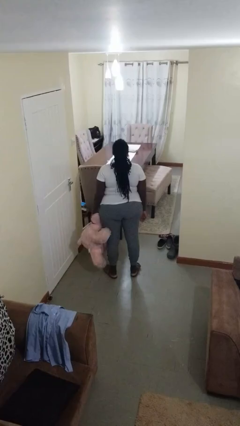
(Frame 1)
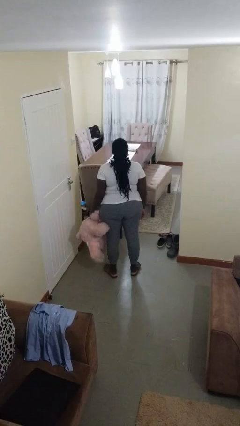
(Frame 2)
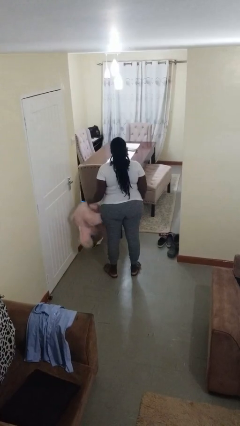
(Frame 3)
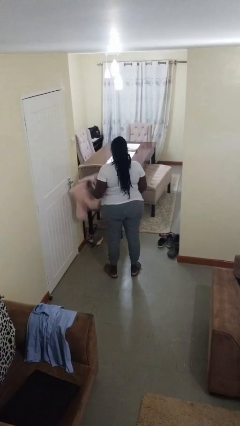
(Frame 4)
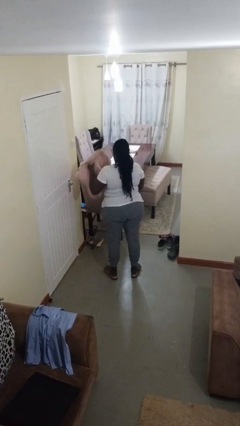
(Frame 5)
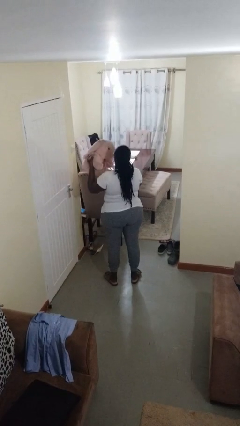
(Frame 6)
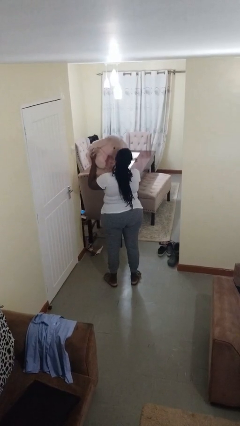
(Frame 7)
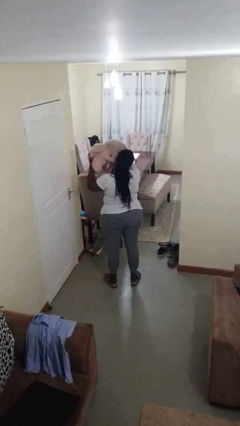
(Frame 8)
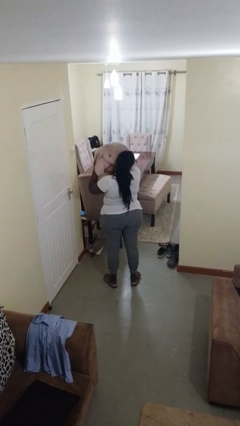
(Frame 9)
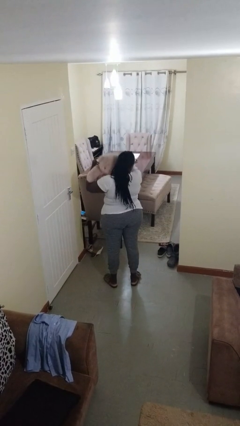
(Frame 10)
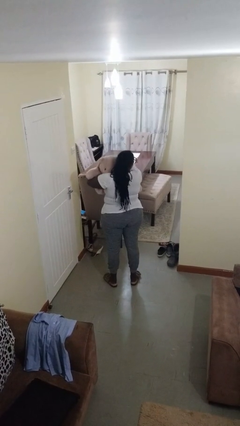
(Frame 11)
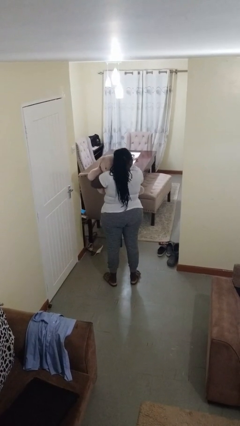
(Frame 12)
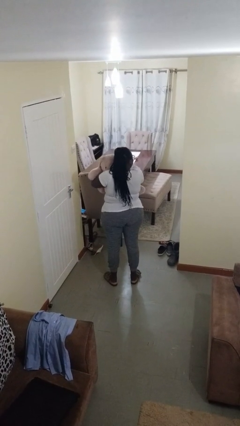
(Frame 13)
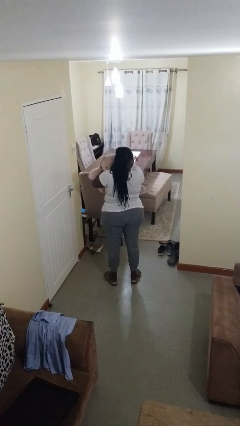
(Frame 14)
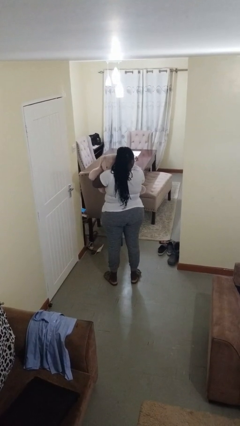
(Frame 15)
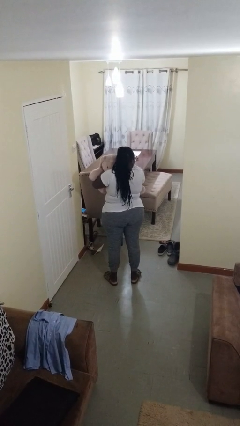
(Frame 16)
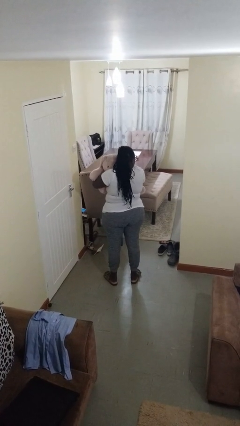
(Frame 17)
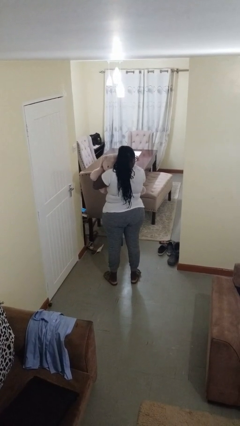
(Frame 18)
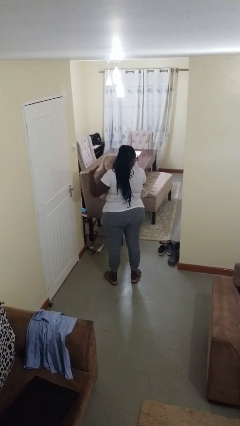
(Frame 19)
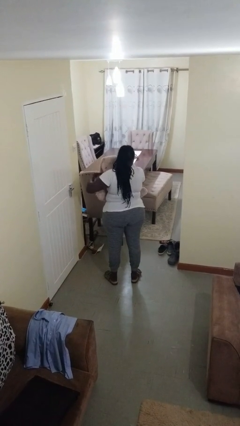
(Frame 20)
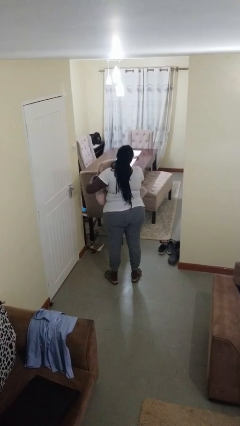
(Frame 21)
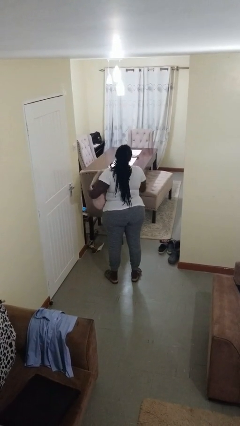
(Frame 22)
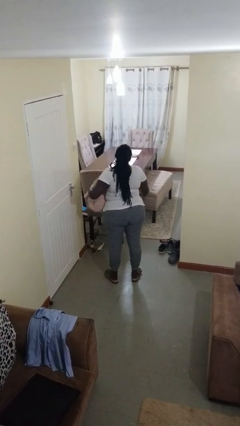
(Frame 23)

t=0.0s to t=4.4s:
person hugs stuffed animal

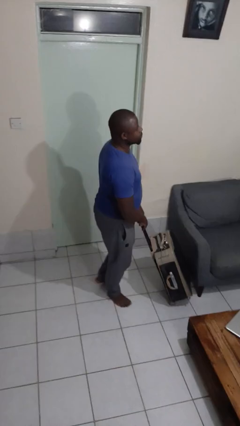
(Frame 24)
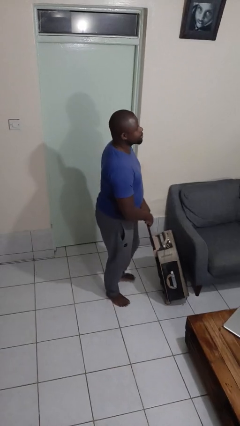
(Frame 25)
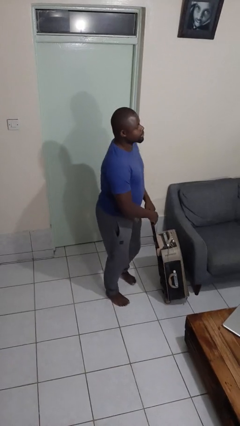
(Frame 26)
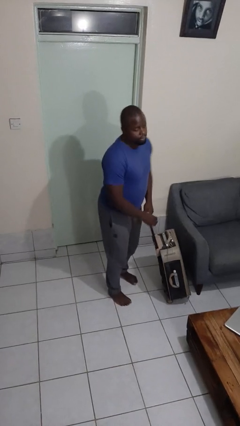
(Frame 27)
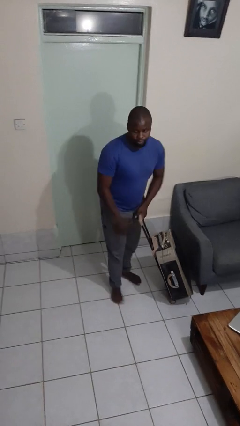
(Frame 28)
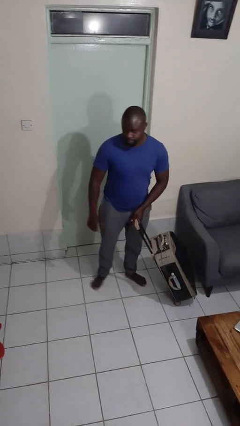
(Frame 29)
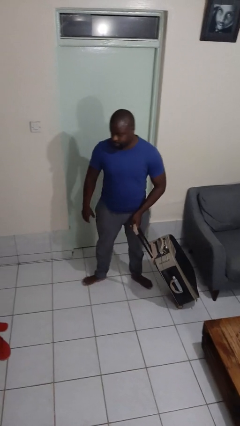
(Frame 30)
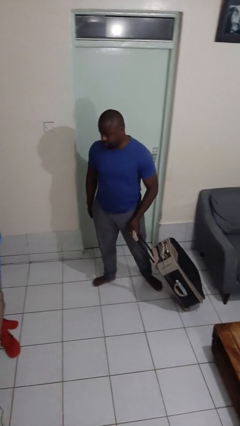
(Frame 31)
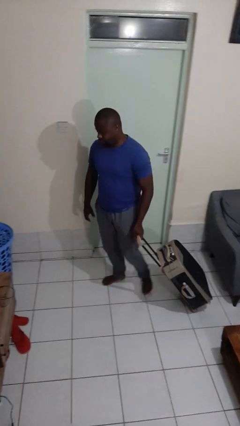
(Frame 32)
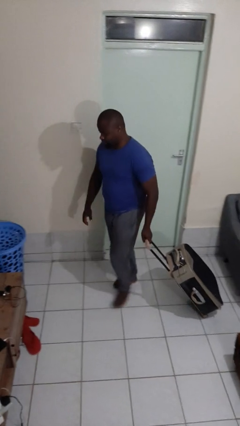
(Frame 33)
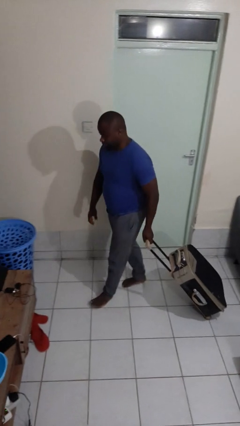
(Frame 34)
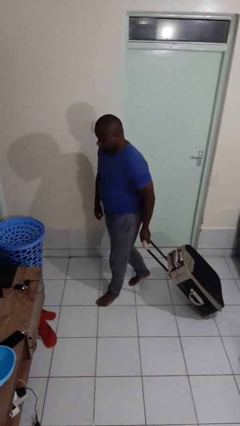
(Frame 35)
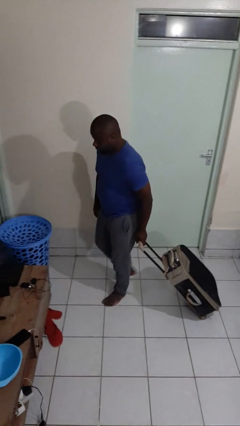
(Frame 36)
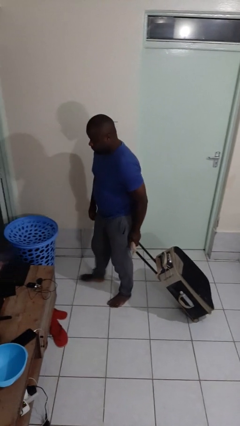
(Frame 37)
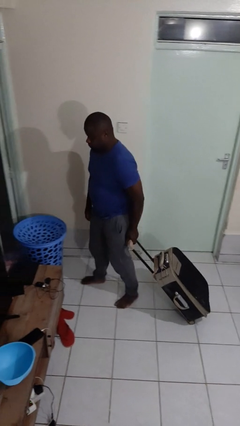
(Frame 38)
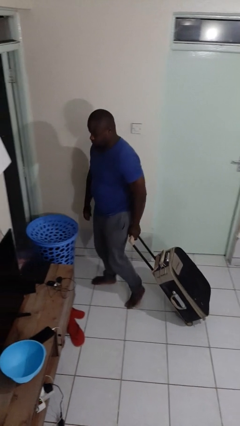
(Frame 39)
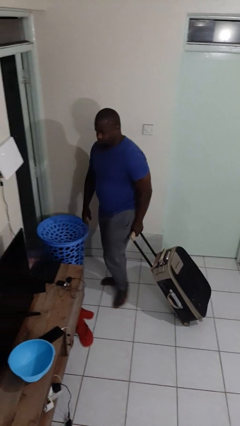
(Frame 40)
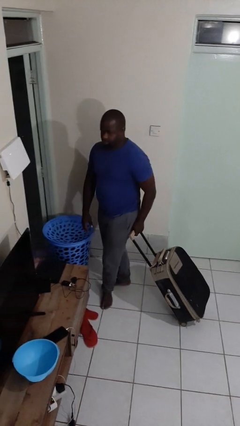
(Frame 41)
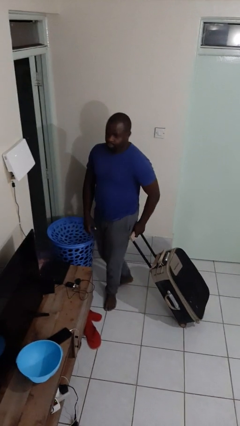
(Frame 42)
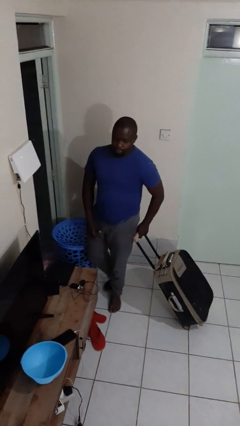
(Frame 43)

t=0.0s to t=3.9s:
person pulls wheeled cart

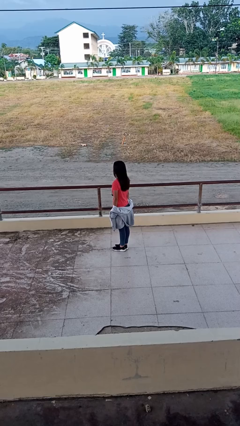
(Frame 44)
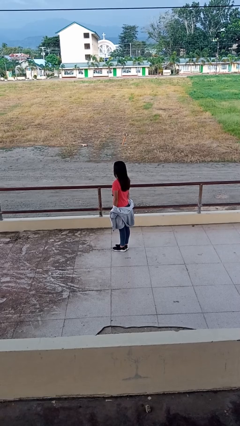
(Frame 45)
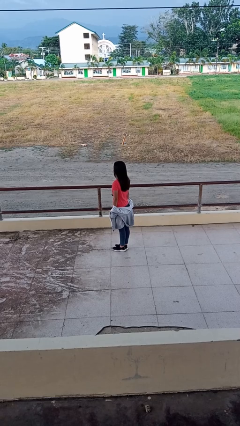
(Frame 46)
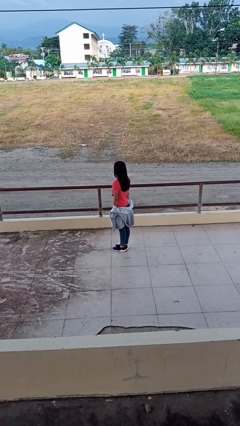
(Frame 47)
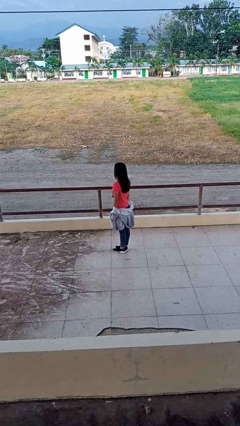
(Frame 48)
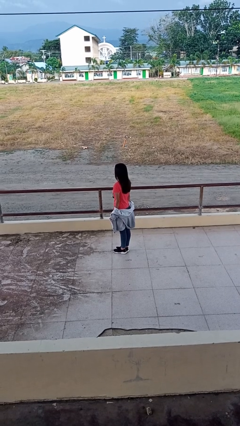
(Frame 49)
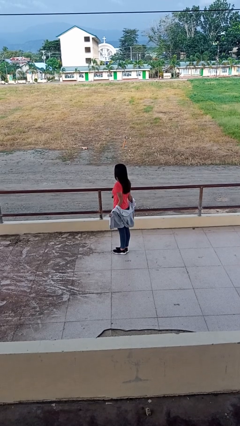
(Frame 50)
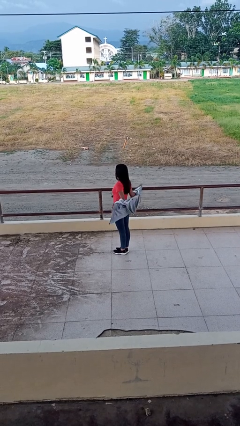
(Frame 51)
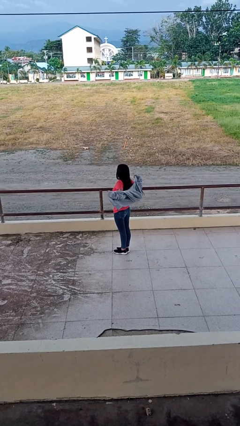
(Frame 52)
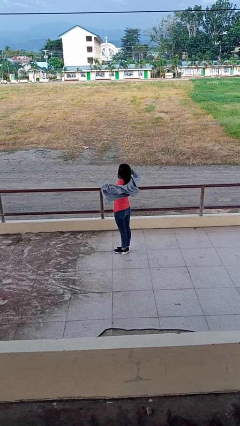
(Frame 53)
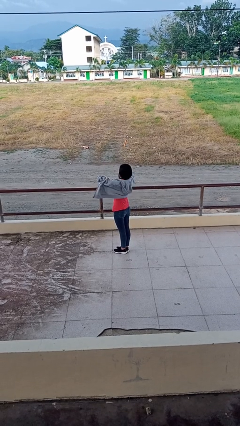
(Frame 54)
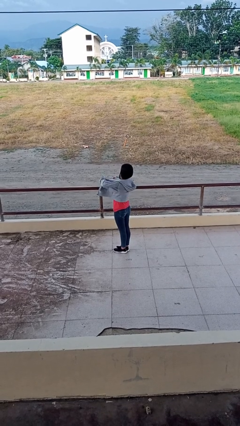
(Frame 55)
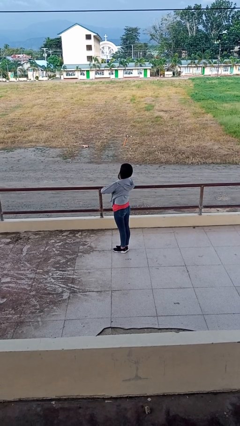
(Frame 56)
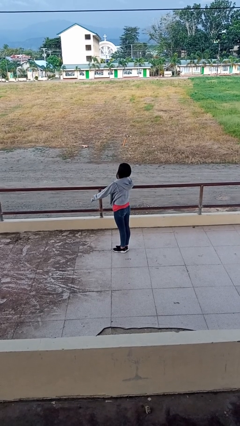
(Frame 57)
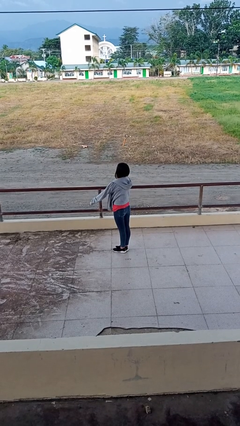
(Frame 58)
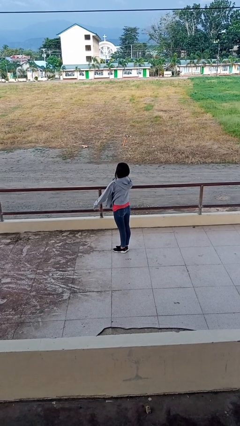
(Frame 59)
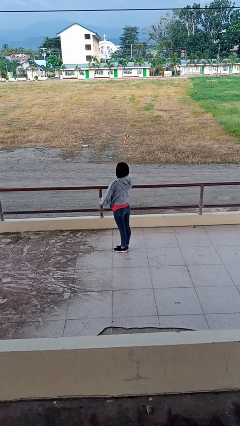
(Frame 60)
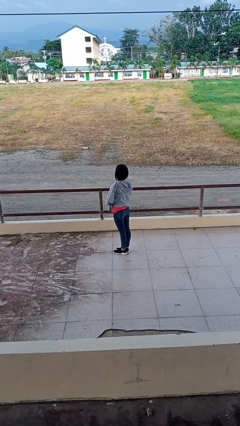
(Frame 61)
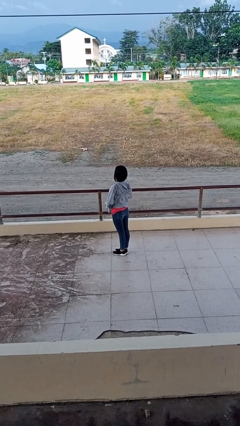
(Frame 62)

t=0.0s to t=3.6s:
person puts on jacket

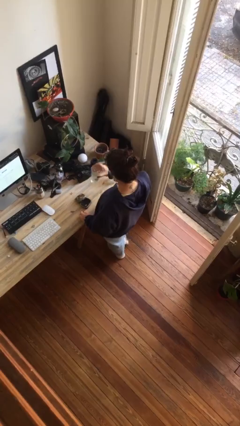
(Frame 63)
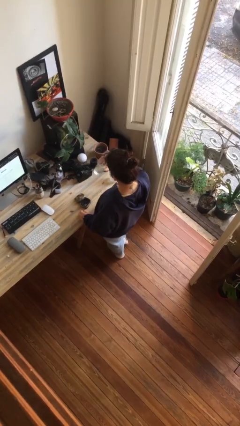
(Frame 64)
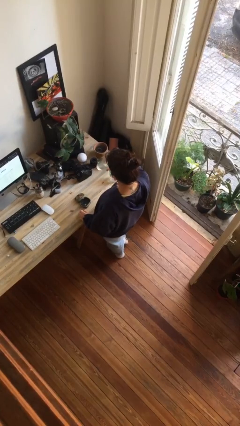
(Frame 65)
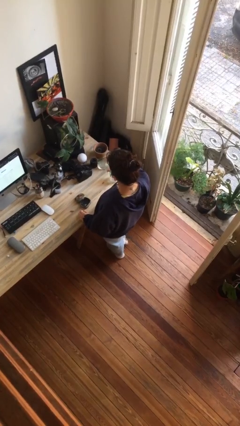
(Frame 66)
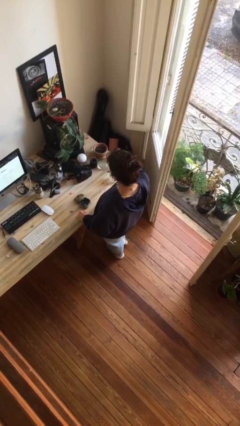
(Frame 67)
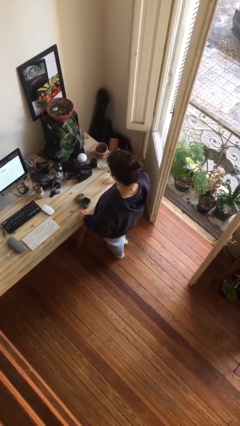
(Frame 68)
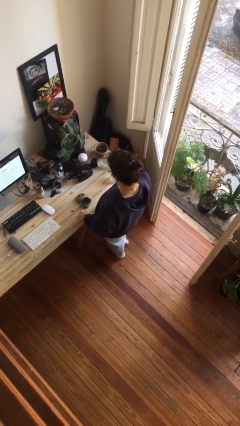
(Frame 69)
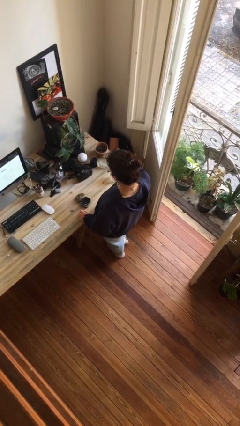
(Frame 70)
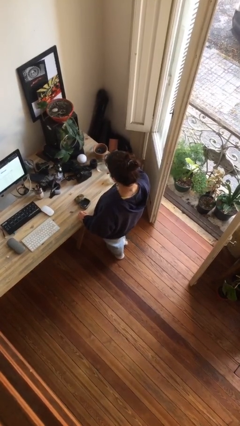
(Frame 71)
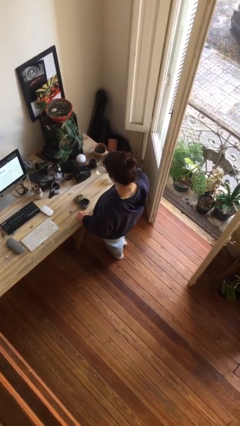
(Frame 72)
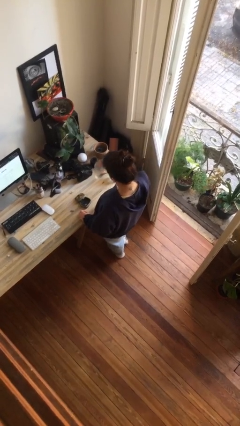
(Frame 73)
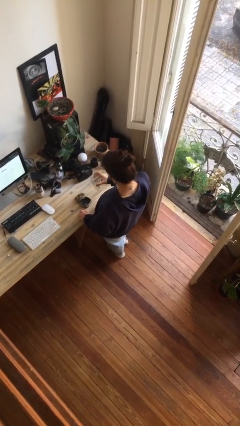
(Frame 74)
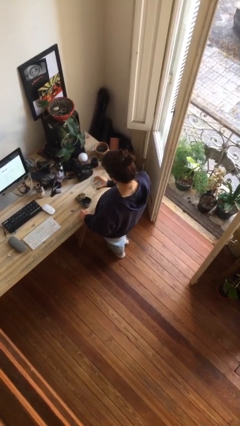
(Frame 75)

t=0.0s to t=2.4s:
person drinks from cup

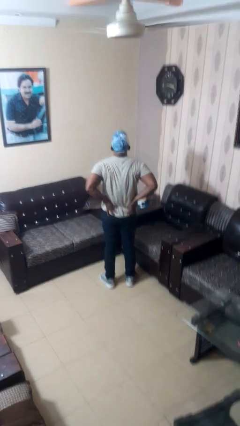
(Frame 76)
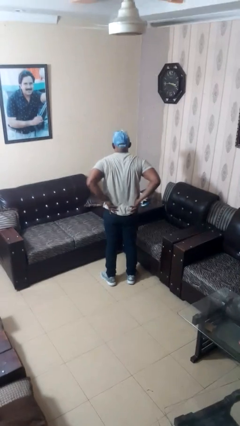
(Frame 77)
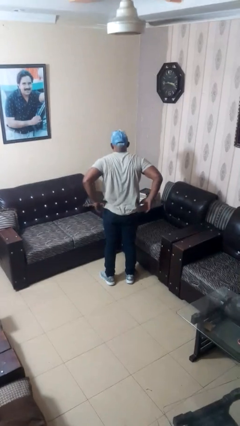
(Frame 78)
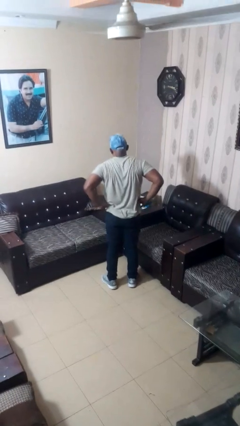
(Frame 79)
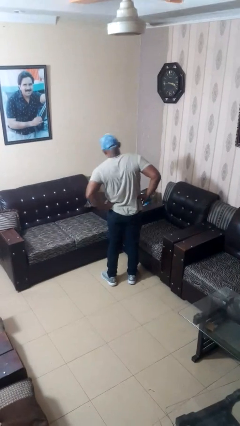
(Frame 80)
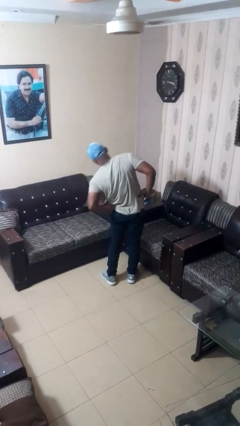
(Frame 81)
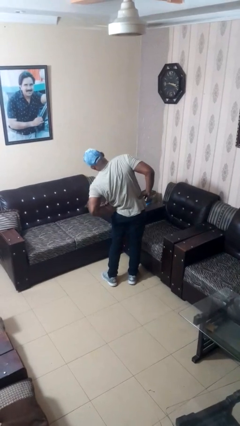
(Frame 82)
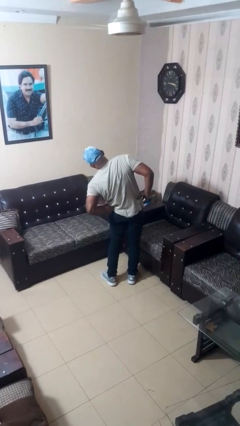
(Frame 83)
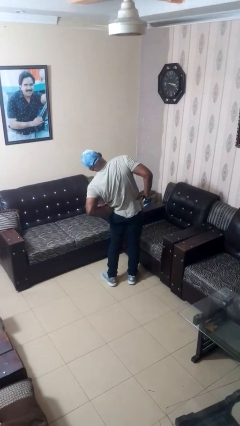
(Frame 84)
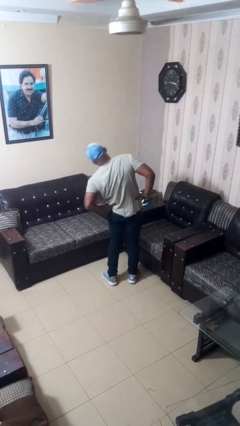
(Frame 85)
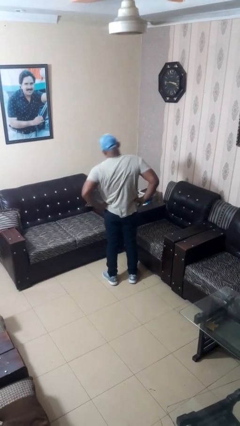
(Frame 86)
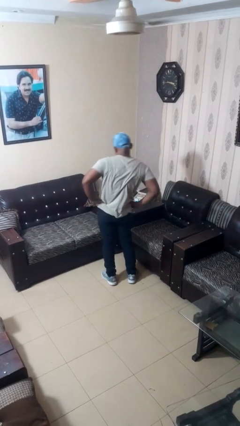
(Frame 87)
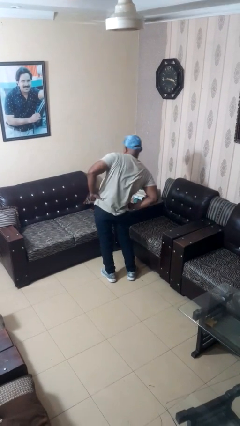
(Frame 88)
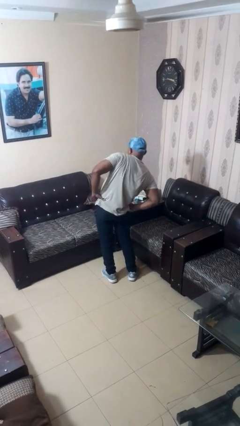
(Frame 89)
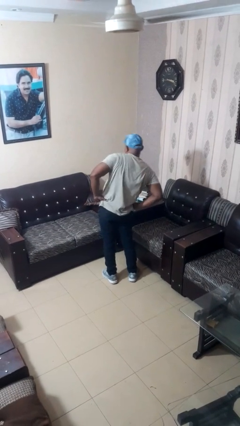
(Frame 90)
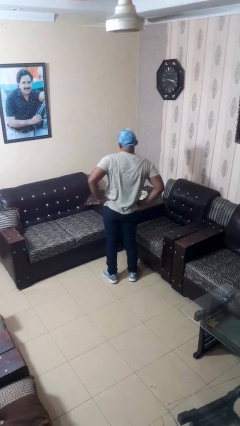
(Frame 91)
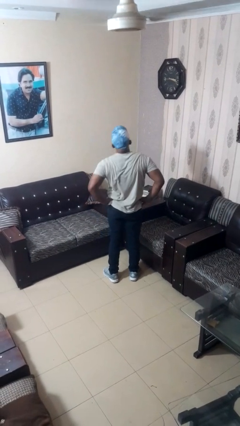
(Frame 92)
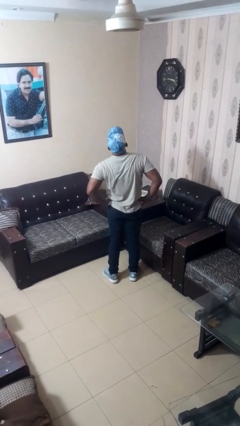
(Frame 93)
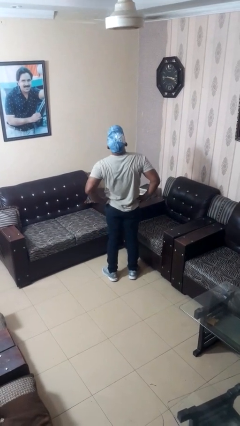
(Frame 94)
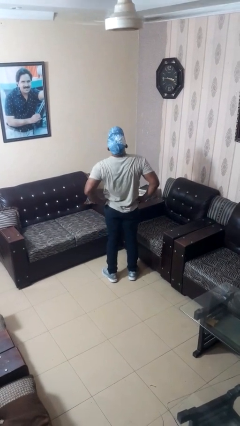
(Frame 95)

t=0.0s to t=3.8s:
person stretches arms to side
